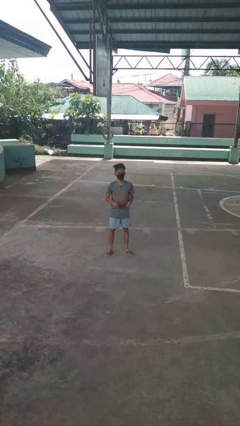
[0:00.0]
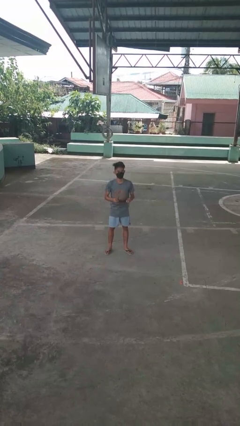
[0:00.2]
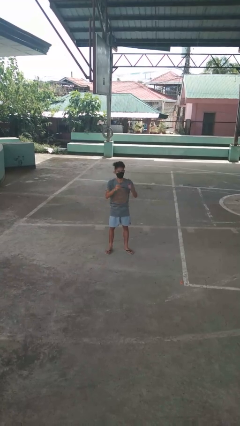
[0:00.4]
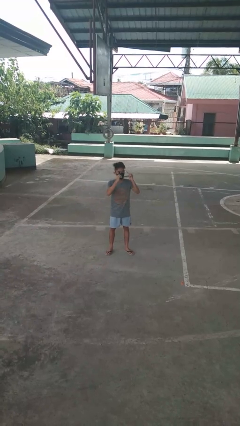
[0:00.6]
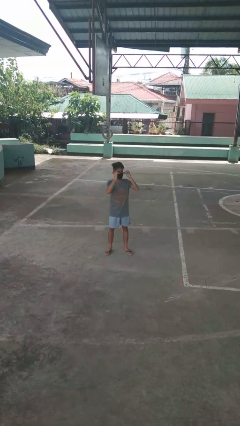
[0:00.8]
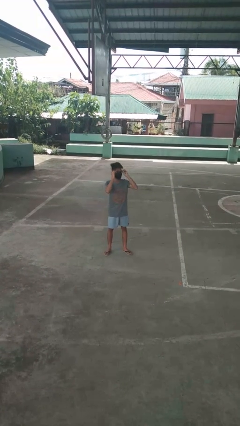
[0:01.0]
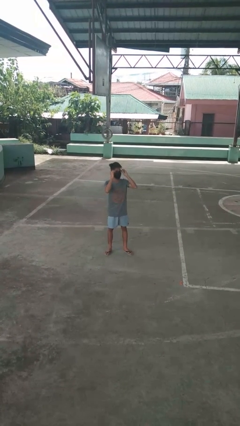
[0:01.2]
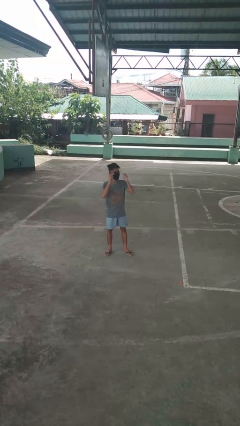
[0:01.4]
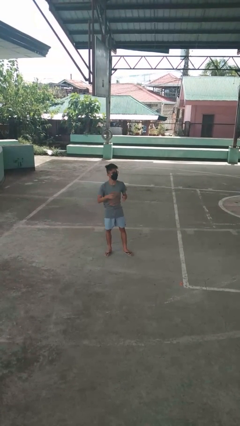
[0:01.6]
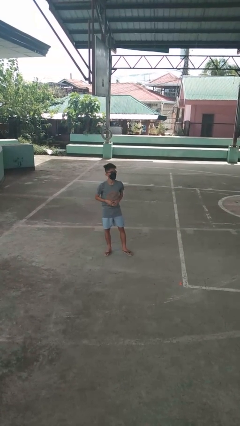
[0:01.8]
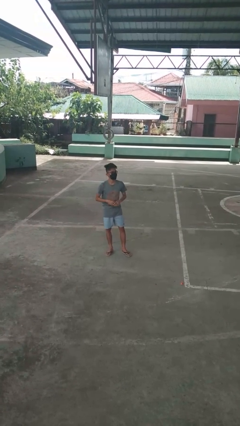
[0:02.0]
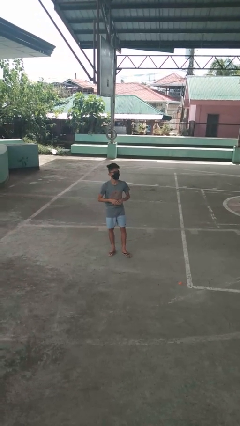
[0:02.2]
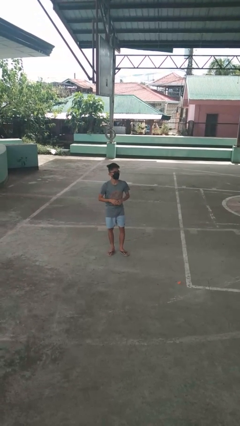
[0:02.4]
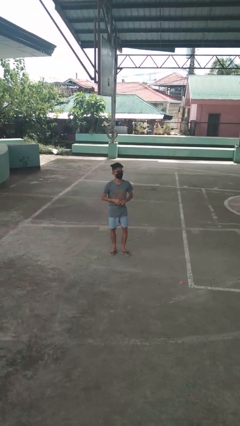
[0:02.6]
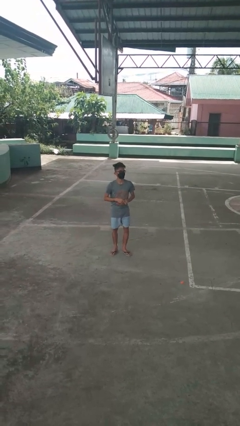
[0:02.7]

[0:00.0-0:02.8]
person puts on glasses

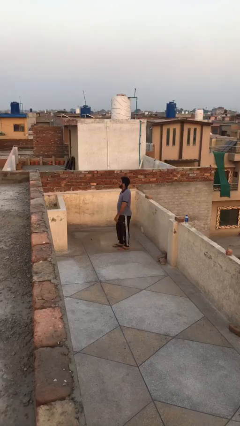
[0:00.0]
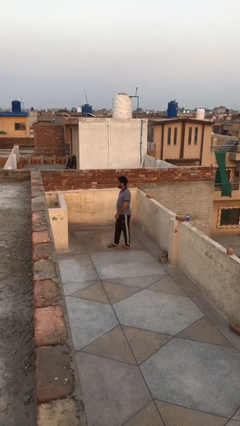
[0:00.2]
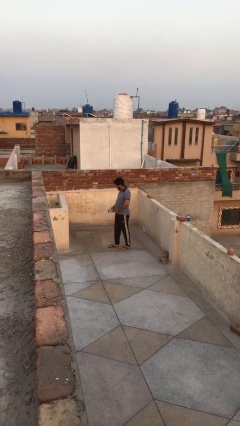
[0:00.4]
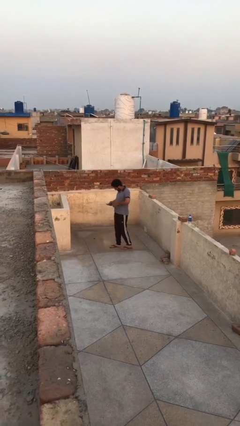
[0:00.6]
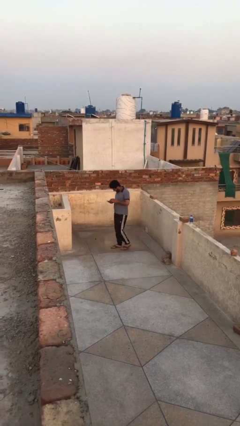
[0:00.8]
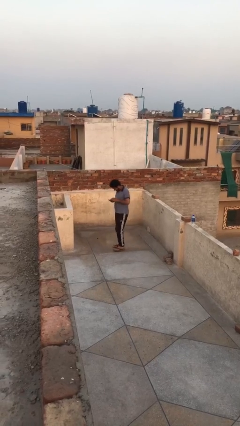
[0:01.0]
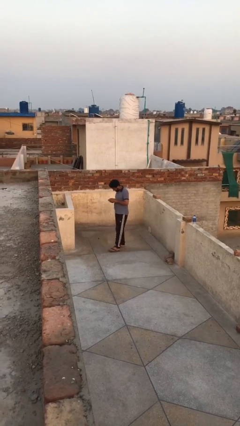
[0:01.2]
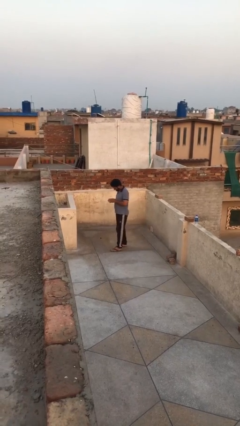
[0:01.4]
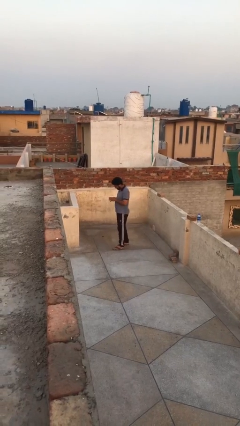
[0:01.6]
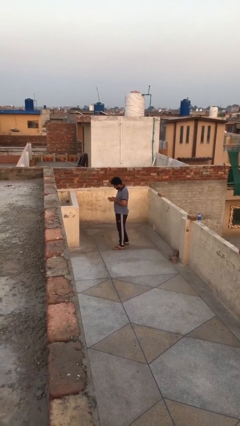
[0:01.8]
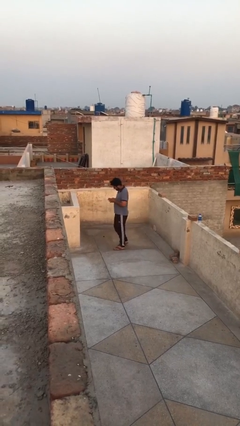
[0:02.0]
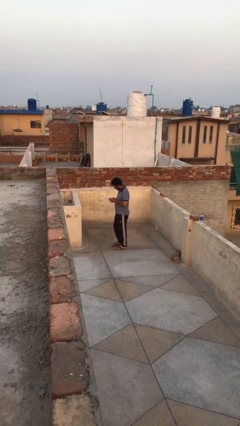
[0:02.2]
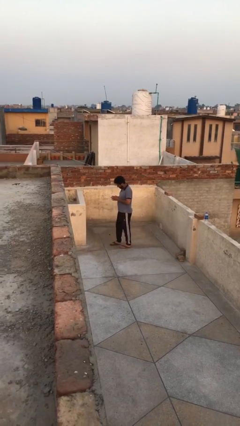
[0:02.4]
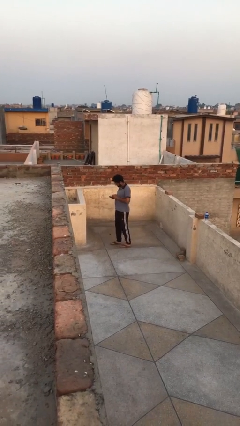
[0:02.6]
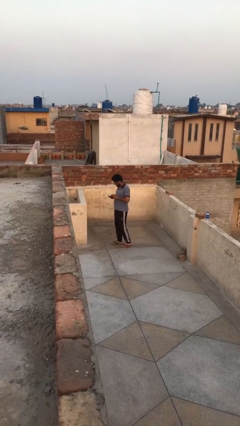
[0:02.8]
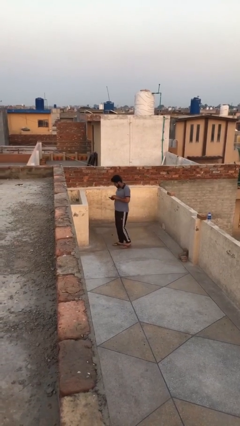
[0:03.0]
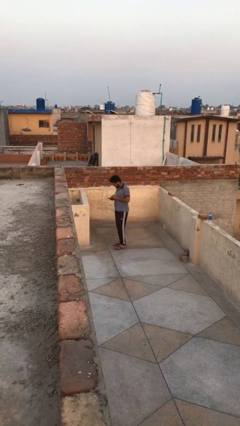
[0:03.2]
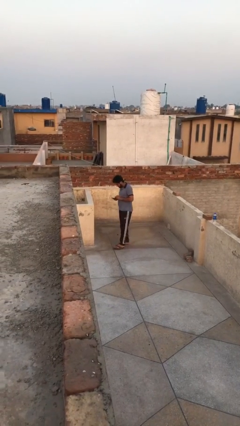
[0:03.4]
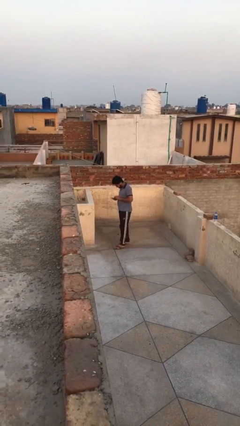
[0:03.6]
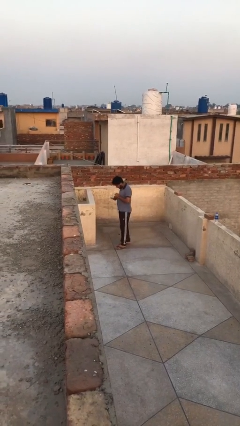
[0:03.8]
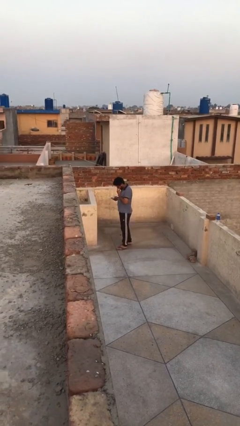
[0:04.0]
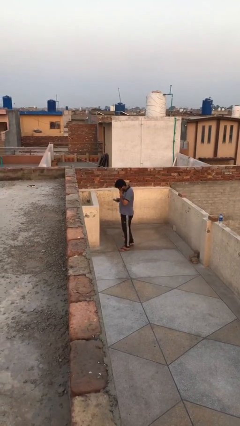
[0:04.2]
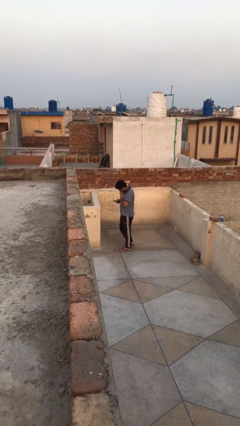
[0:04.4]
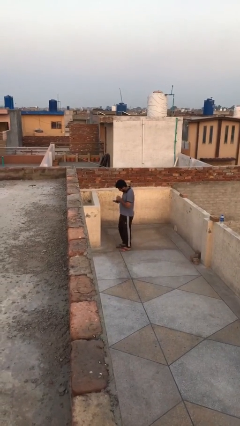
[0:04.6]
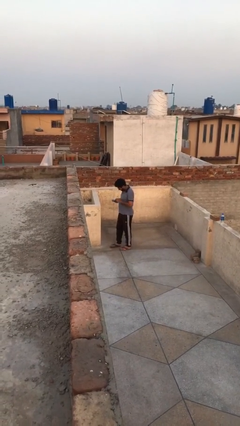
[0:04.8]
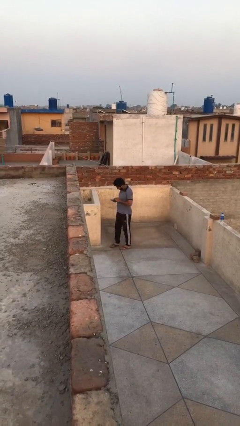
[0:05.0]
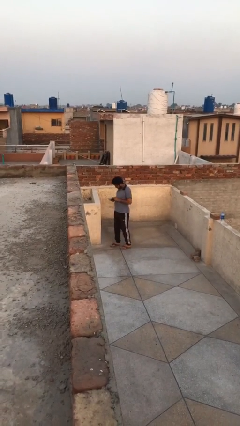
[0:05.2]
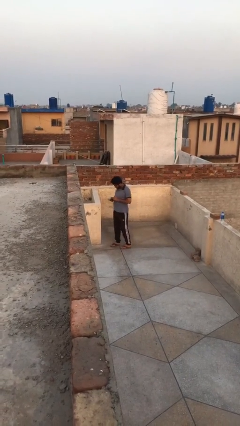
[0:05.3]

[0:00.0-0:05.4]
person texts on phone

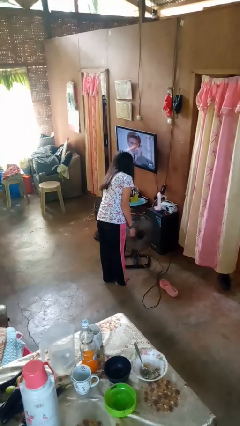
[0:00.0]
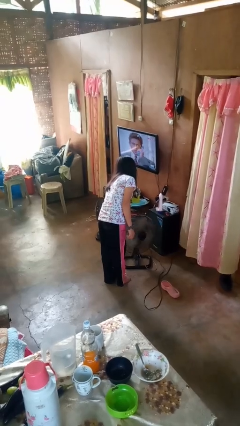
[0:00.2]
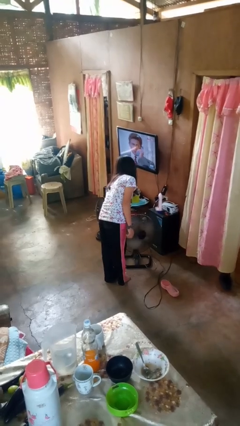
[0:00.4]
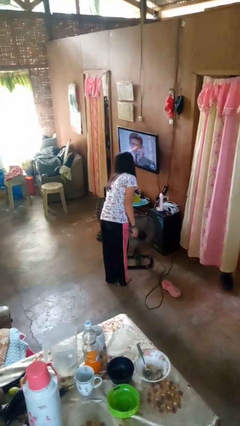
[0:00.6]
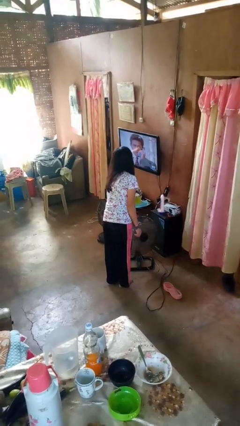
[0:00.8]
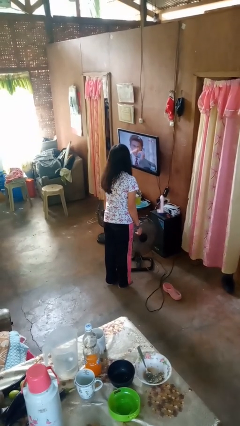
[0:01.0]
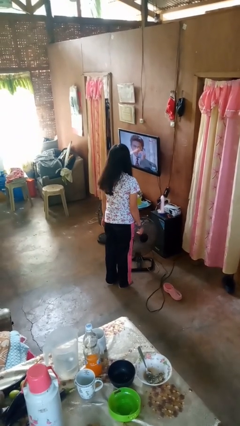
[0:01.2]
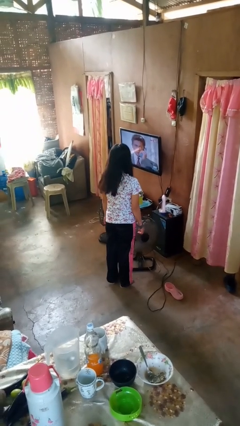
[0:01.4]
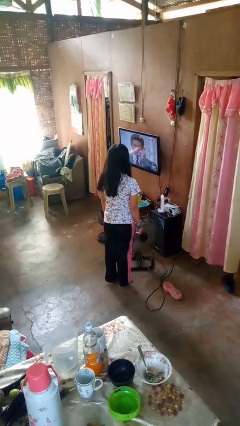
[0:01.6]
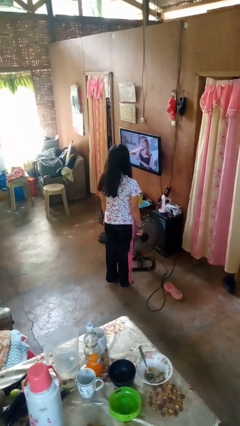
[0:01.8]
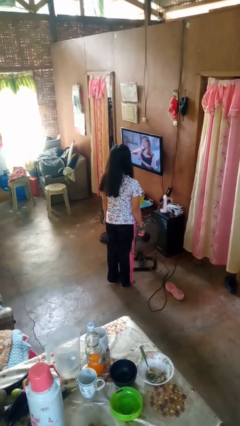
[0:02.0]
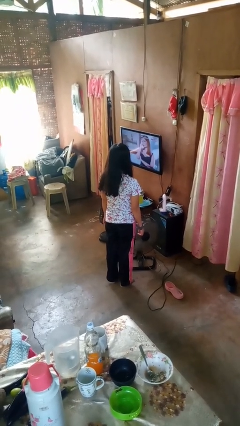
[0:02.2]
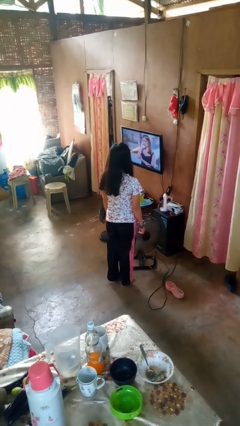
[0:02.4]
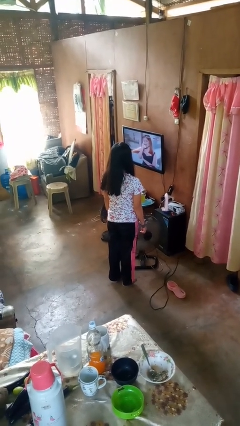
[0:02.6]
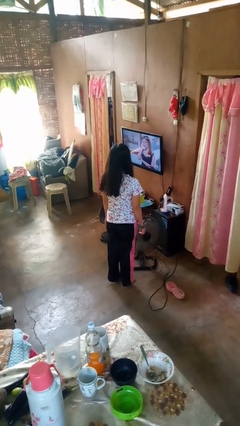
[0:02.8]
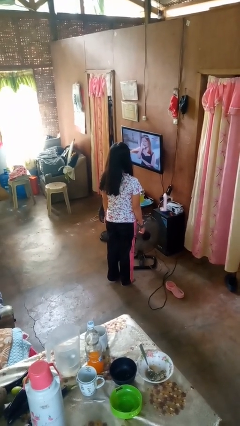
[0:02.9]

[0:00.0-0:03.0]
person turns on fan

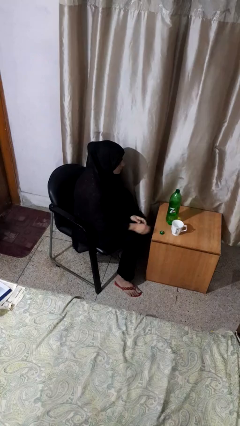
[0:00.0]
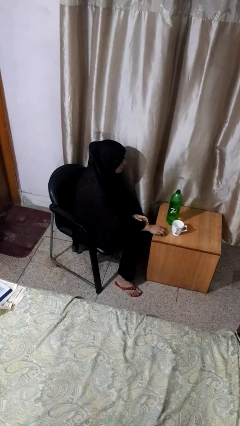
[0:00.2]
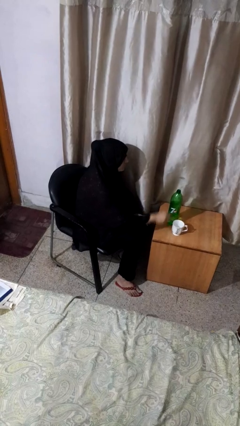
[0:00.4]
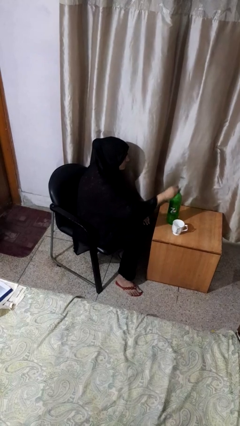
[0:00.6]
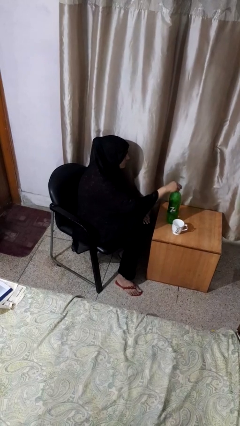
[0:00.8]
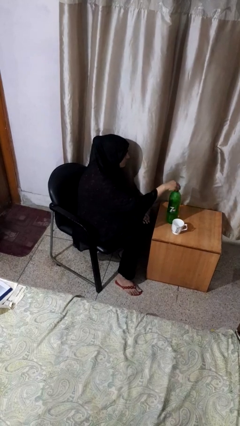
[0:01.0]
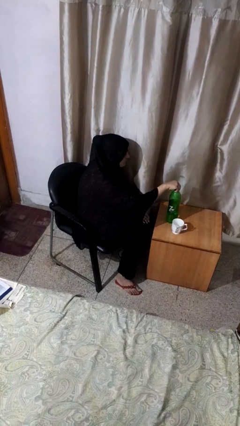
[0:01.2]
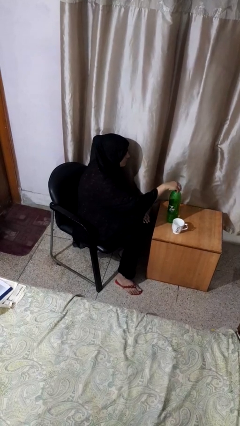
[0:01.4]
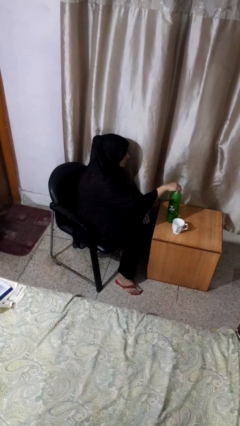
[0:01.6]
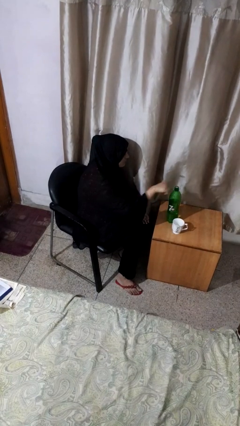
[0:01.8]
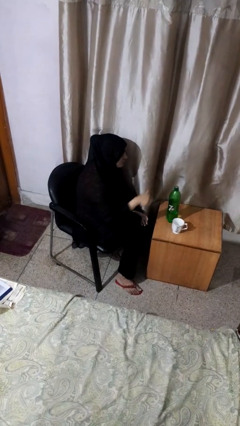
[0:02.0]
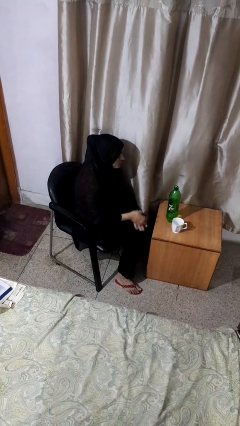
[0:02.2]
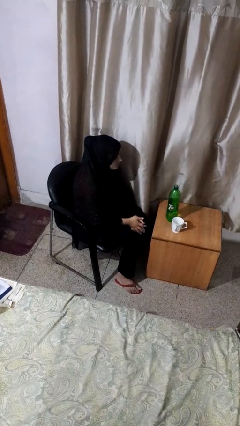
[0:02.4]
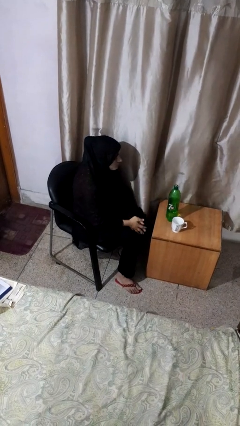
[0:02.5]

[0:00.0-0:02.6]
person screws lid to bottle

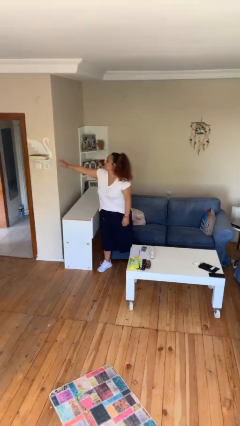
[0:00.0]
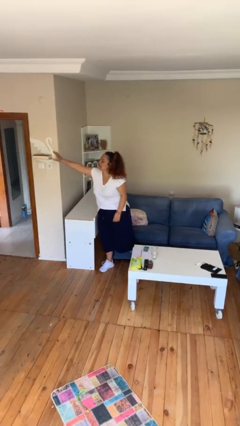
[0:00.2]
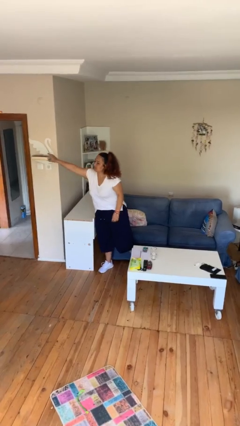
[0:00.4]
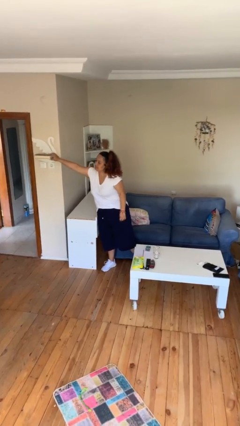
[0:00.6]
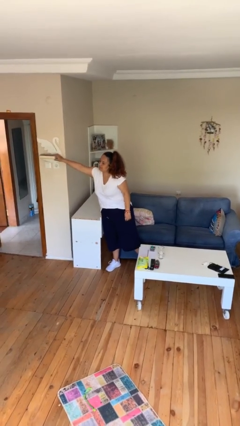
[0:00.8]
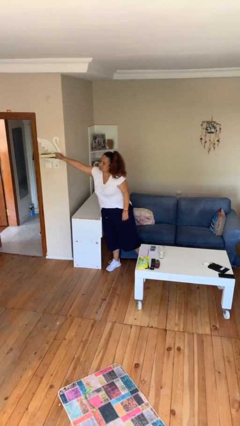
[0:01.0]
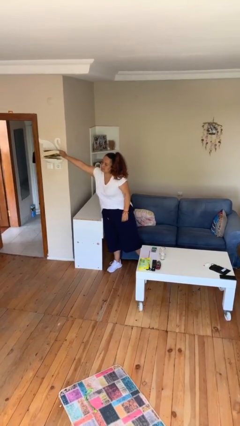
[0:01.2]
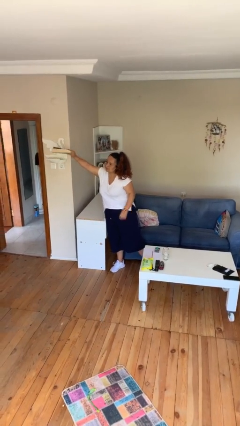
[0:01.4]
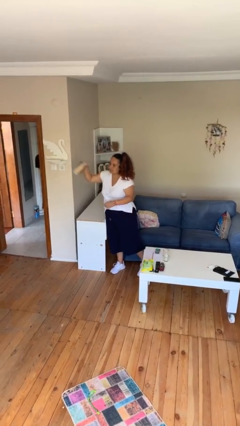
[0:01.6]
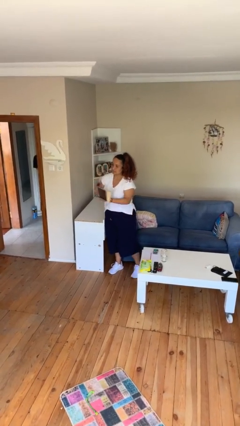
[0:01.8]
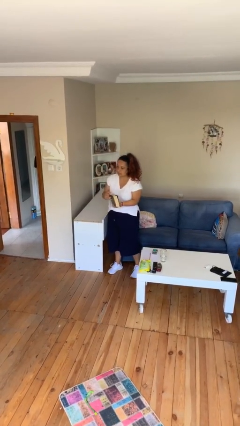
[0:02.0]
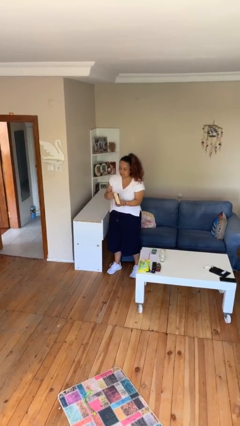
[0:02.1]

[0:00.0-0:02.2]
person picks up object from shelf

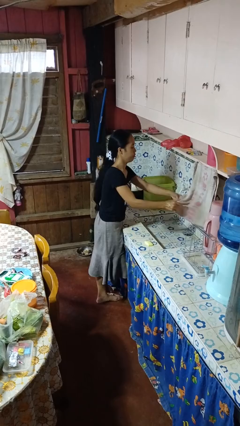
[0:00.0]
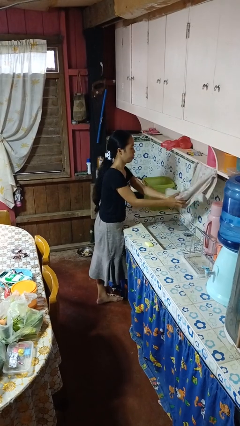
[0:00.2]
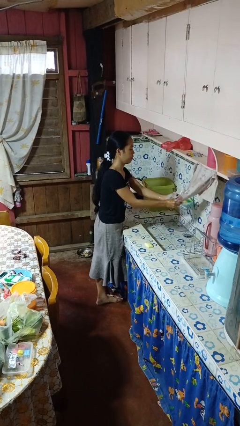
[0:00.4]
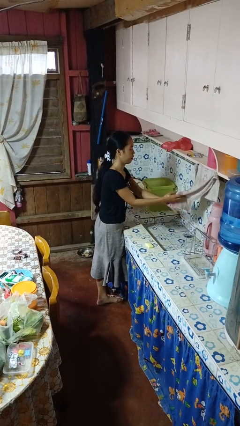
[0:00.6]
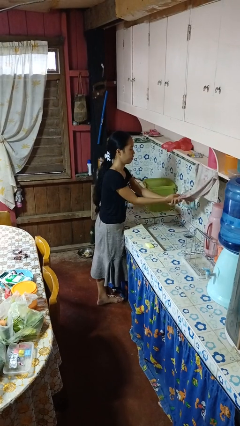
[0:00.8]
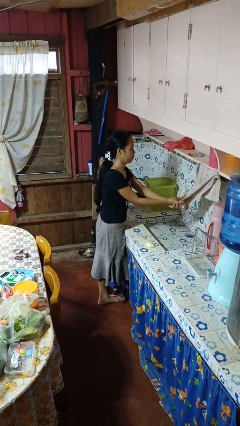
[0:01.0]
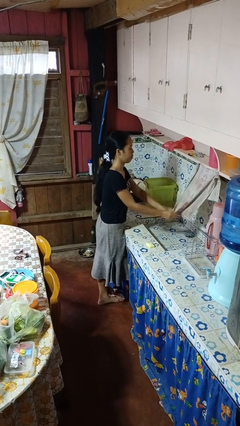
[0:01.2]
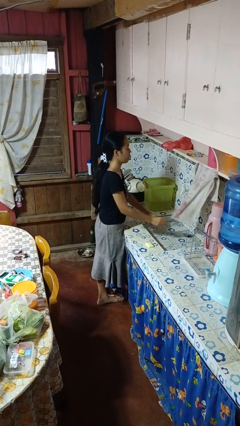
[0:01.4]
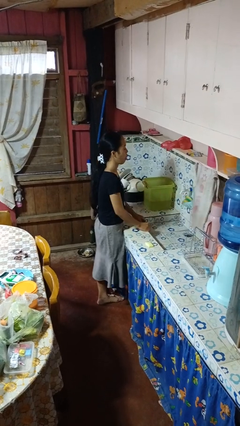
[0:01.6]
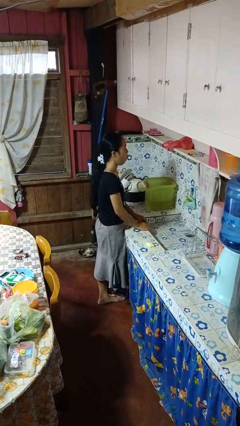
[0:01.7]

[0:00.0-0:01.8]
person dries hands with towel
